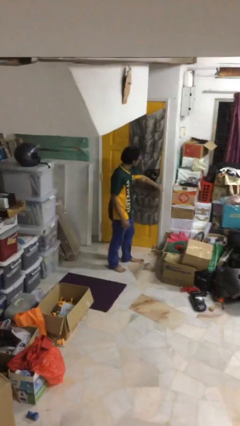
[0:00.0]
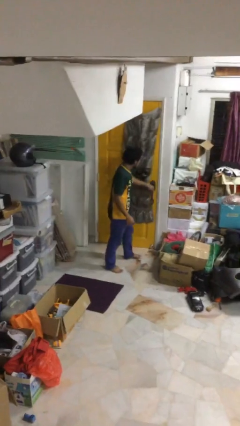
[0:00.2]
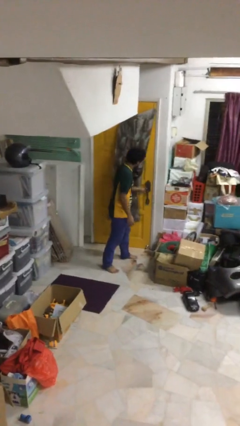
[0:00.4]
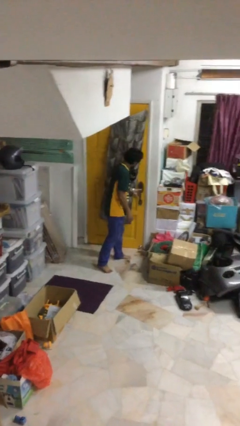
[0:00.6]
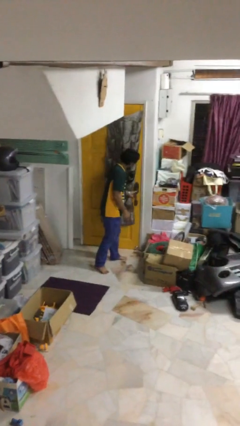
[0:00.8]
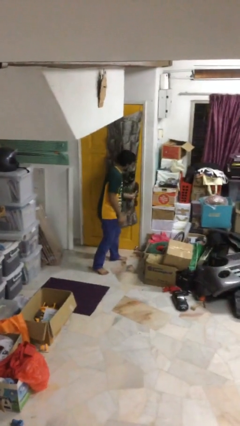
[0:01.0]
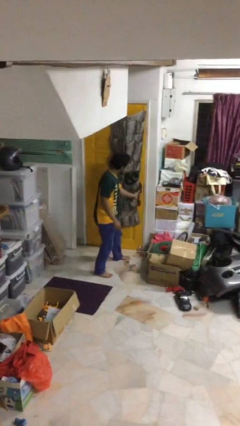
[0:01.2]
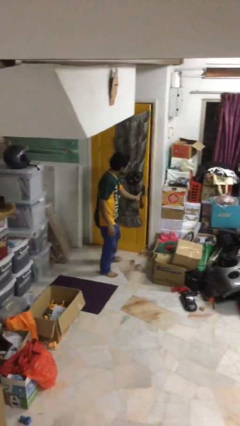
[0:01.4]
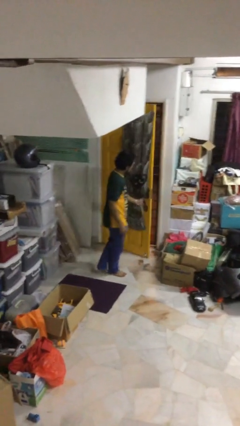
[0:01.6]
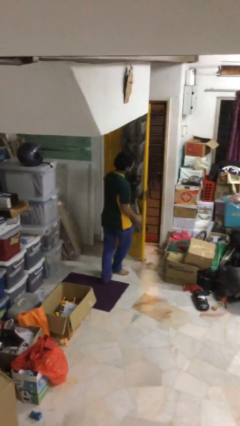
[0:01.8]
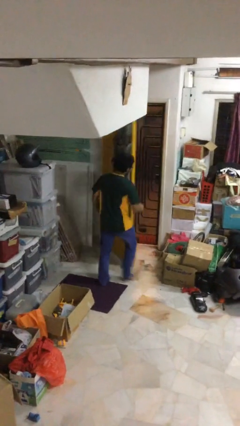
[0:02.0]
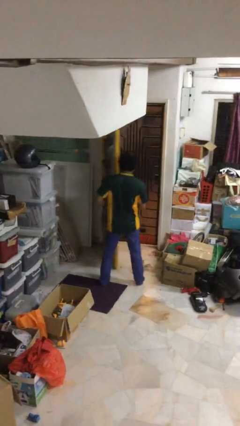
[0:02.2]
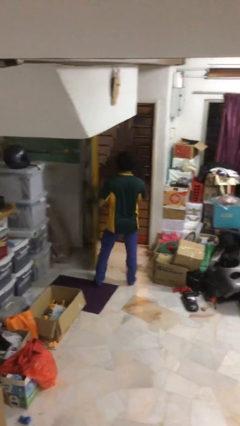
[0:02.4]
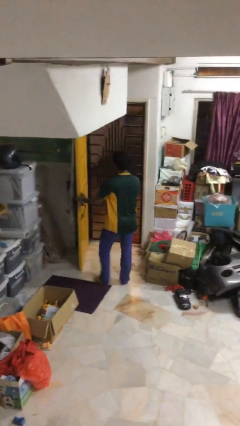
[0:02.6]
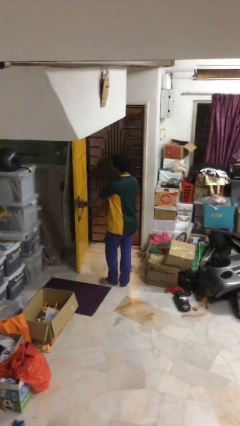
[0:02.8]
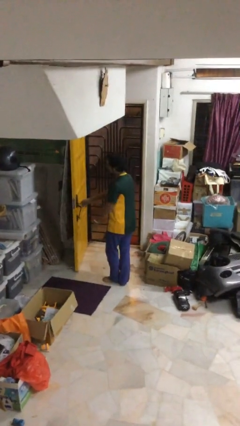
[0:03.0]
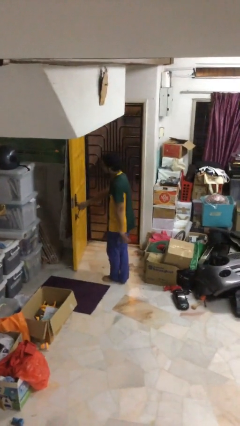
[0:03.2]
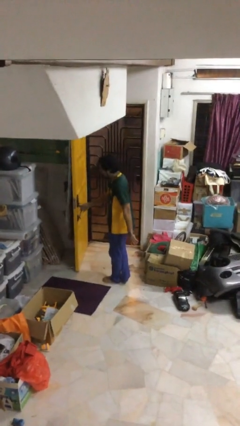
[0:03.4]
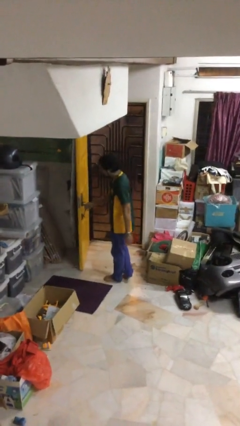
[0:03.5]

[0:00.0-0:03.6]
person opens facility door

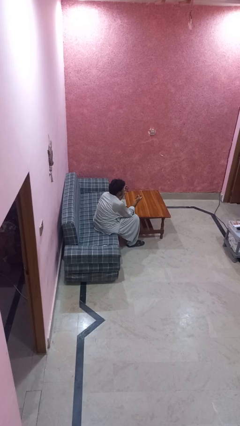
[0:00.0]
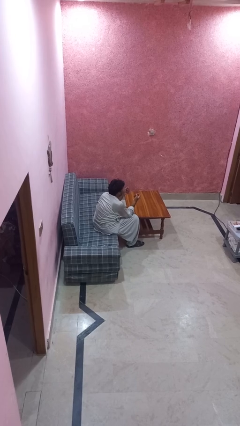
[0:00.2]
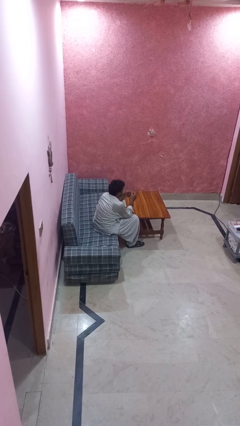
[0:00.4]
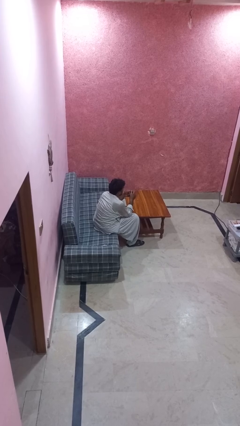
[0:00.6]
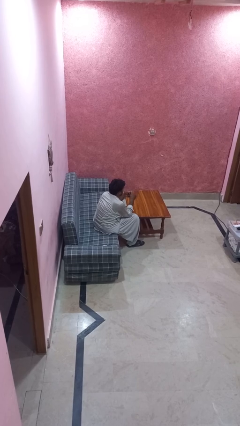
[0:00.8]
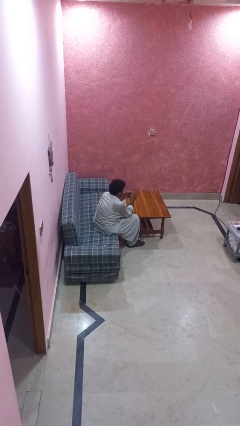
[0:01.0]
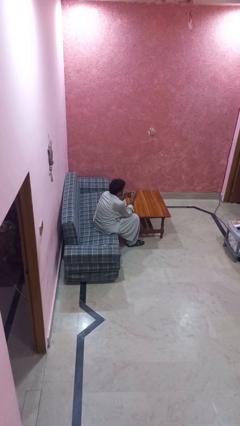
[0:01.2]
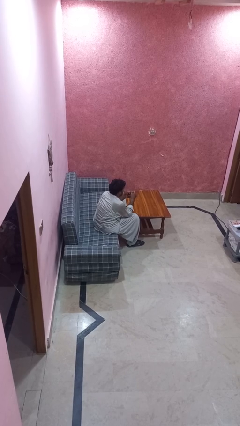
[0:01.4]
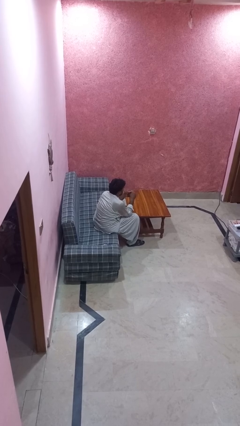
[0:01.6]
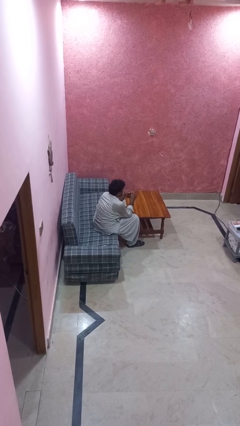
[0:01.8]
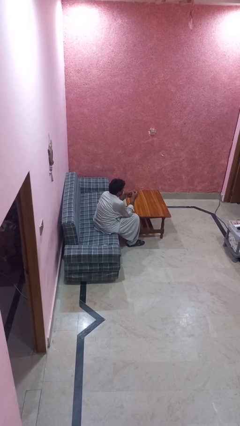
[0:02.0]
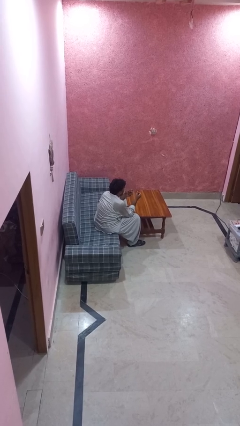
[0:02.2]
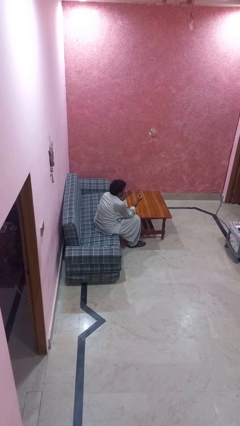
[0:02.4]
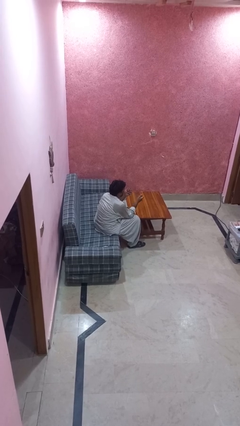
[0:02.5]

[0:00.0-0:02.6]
person files fingernails

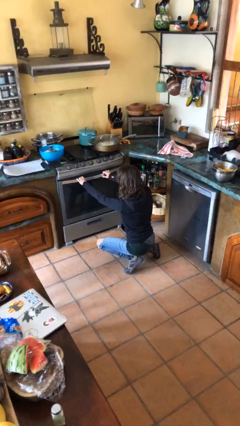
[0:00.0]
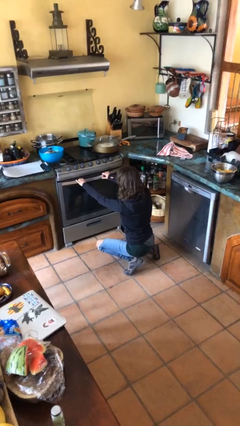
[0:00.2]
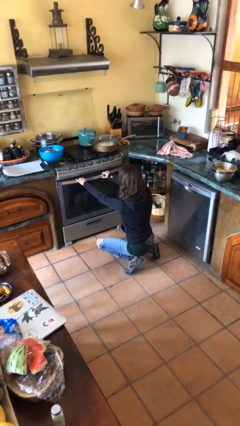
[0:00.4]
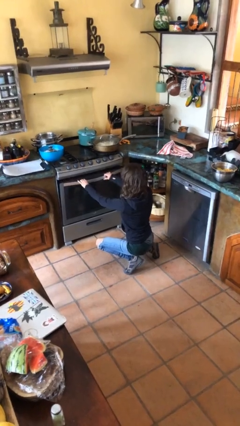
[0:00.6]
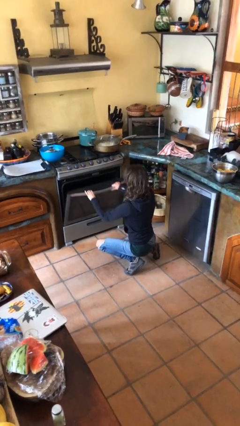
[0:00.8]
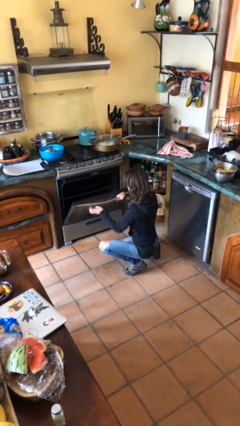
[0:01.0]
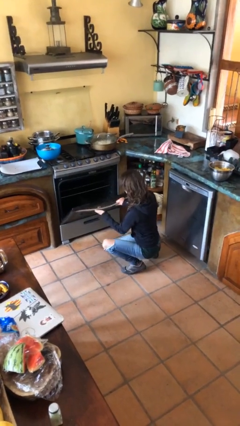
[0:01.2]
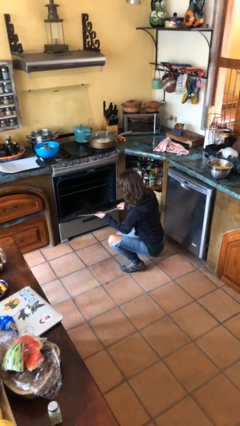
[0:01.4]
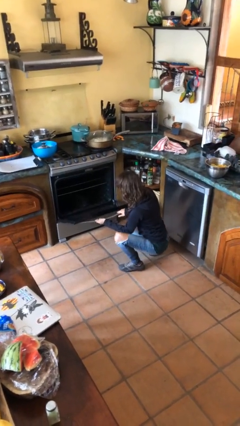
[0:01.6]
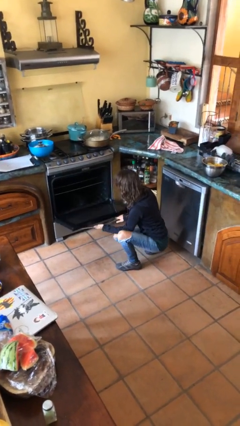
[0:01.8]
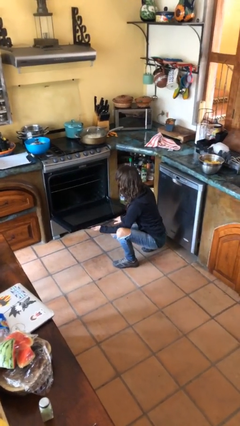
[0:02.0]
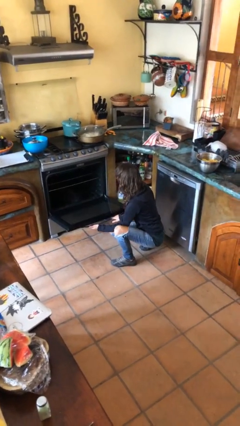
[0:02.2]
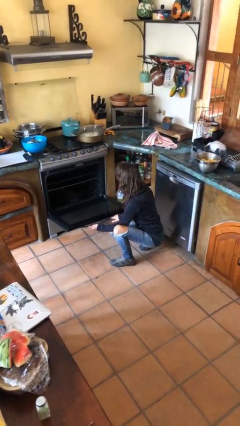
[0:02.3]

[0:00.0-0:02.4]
person opens oven door

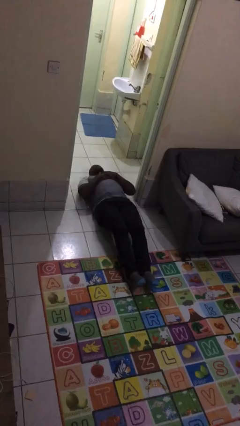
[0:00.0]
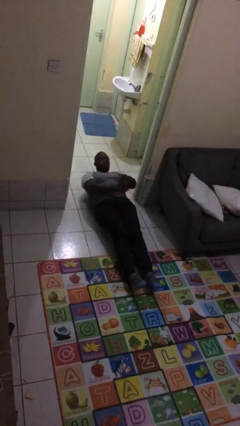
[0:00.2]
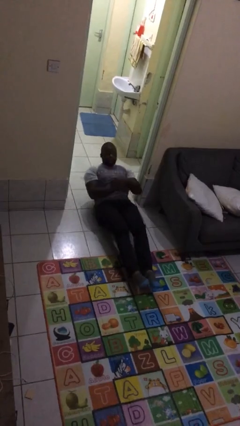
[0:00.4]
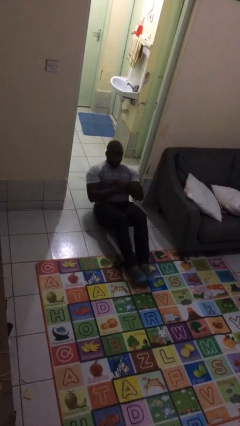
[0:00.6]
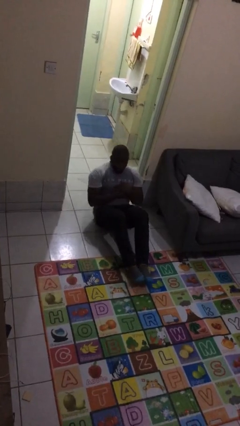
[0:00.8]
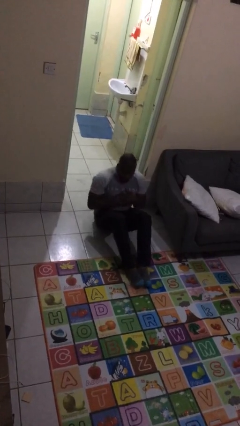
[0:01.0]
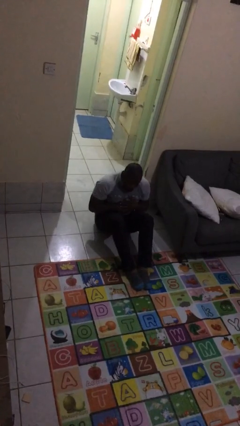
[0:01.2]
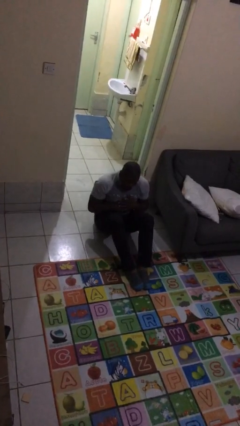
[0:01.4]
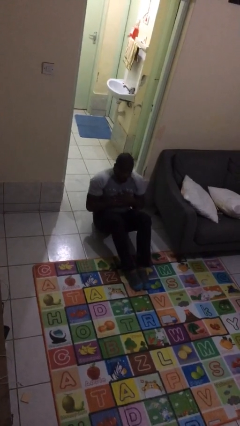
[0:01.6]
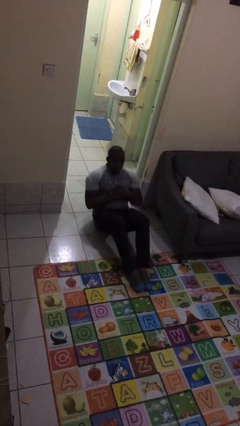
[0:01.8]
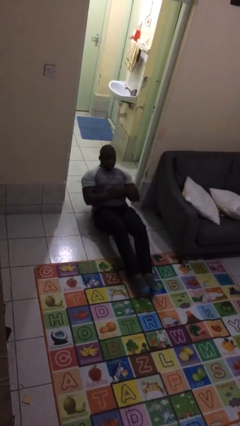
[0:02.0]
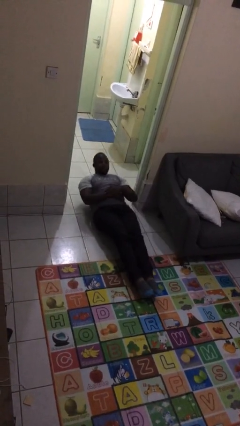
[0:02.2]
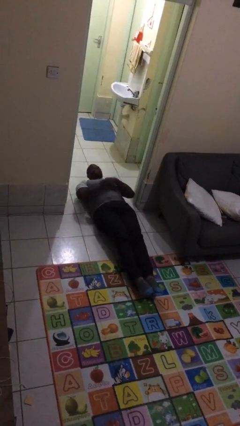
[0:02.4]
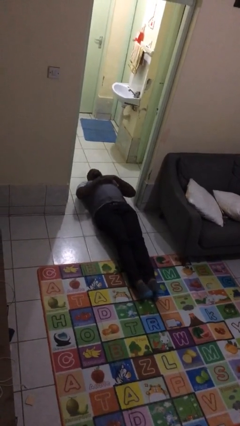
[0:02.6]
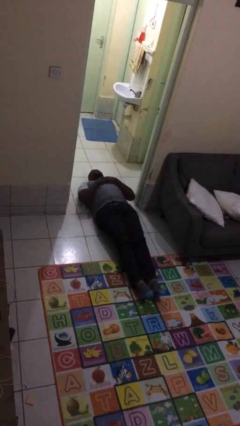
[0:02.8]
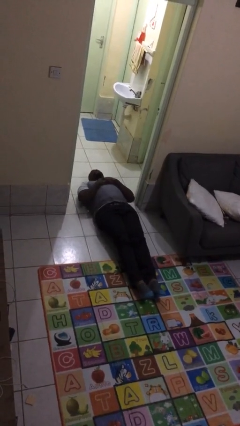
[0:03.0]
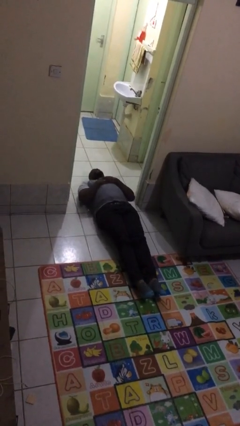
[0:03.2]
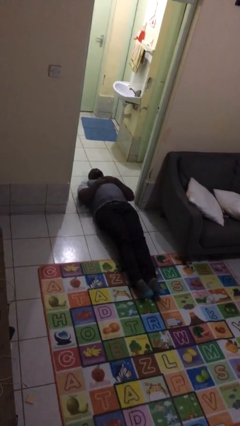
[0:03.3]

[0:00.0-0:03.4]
person exercises with situp

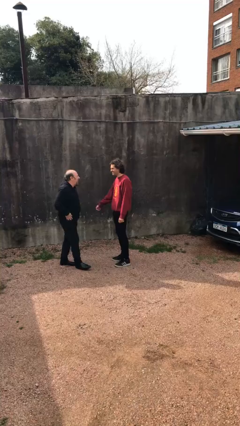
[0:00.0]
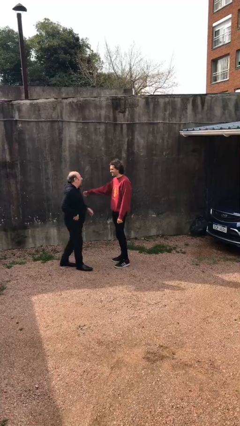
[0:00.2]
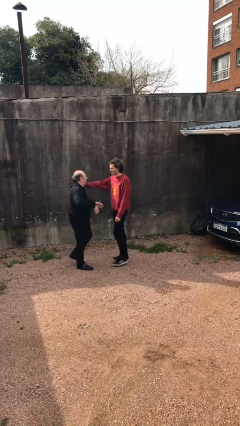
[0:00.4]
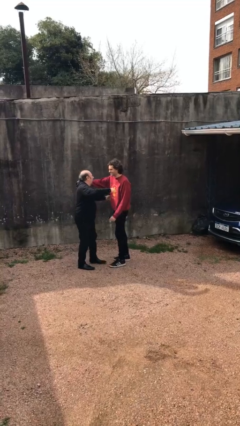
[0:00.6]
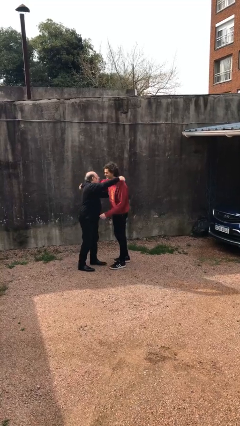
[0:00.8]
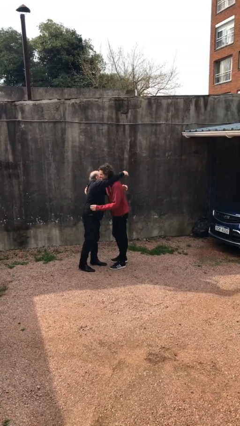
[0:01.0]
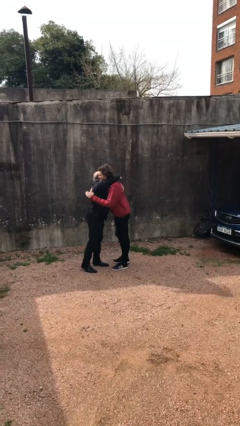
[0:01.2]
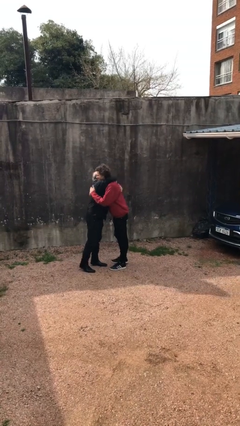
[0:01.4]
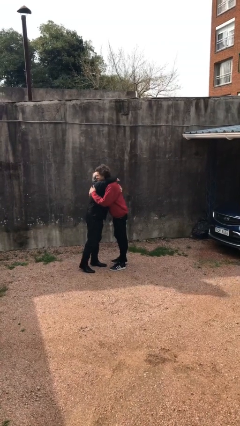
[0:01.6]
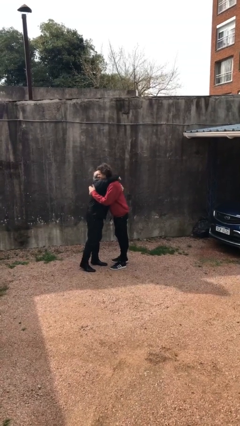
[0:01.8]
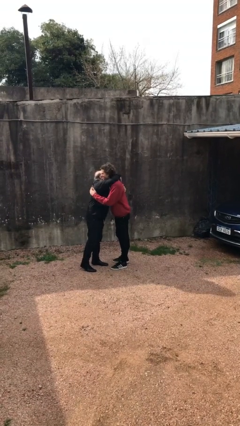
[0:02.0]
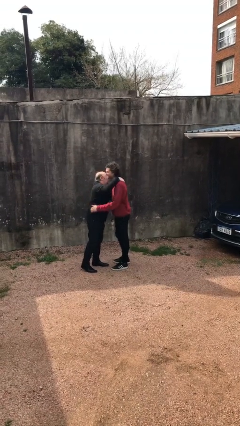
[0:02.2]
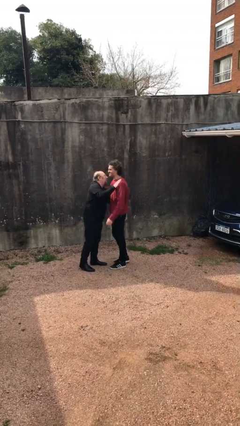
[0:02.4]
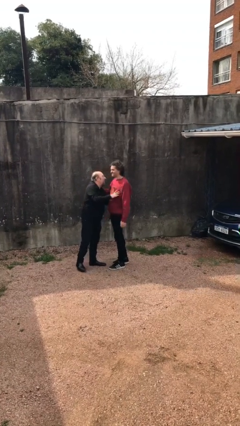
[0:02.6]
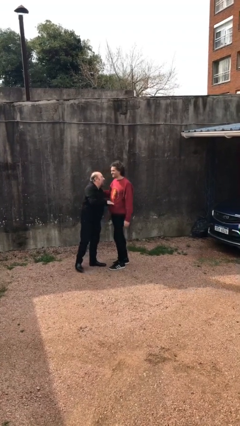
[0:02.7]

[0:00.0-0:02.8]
person embraces person

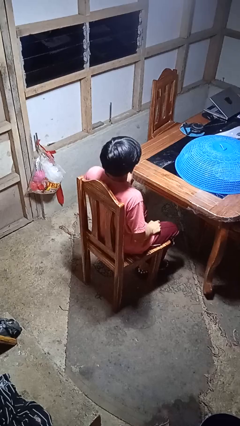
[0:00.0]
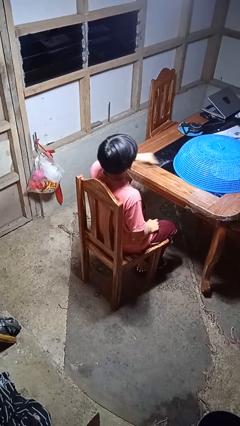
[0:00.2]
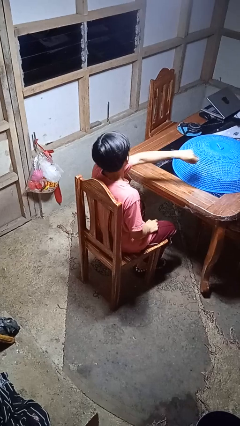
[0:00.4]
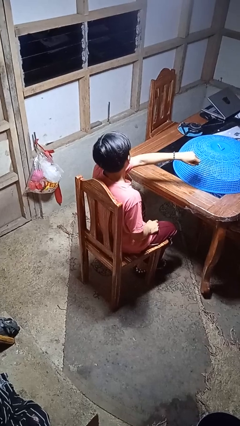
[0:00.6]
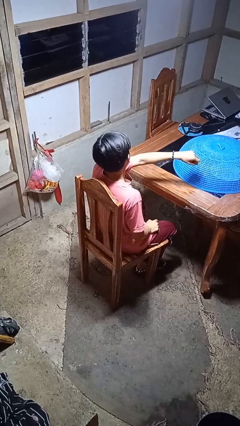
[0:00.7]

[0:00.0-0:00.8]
person punches

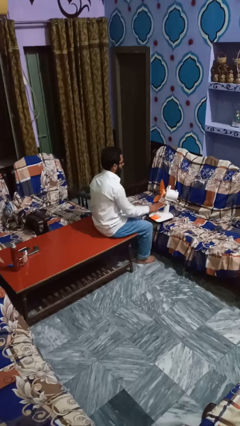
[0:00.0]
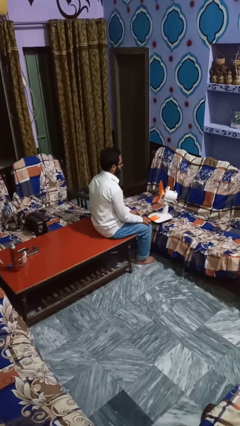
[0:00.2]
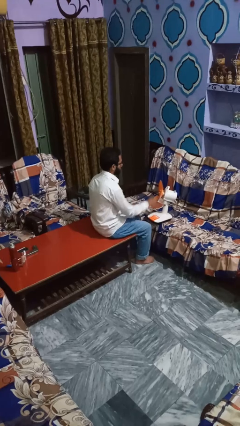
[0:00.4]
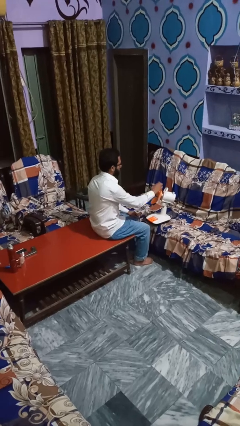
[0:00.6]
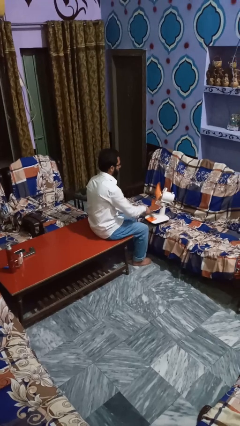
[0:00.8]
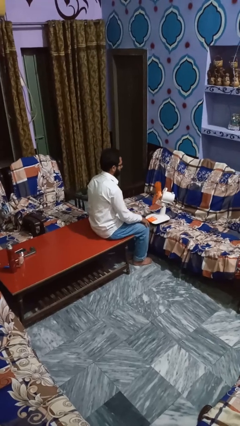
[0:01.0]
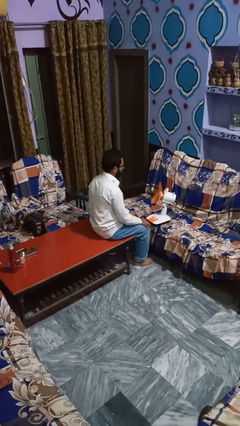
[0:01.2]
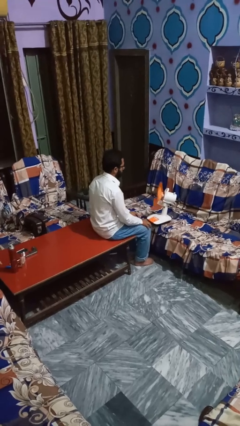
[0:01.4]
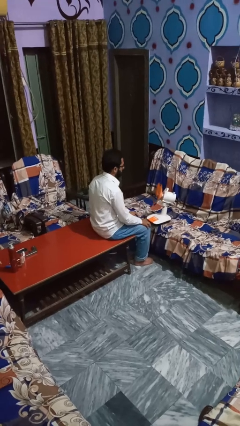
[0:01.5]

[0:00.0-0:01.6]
person turns on fan

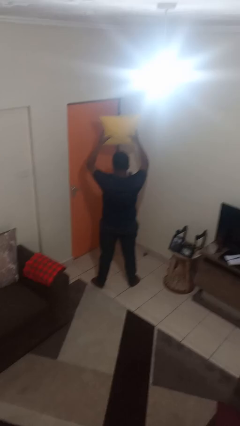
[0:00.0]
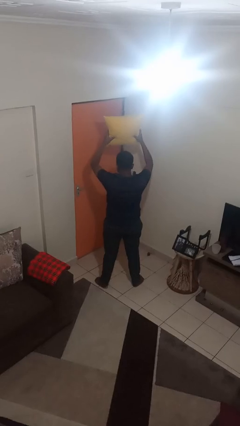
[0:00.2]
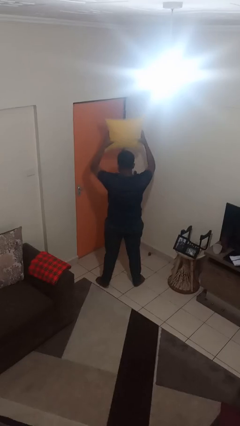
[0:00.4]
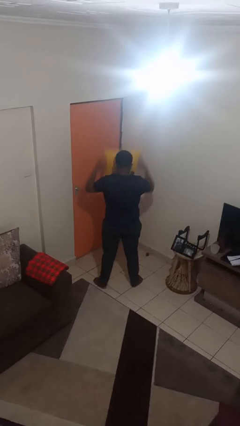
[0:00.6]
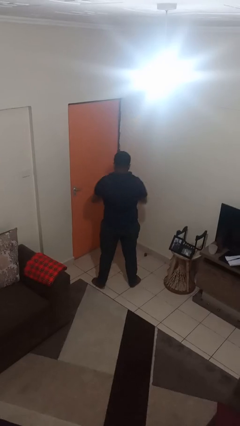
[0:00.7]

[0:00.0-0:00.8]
person drops object
